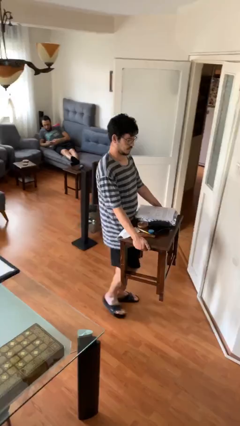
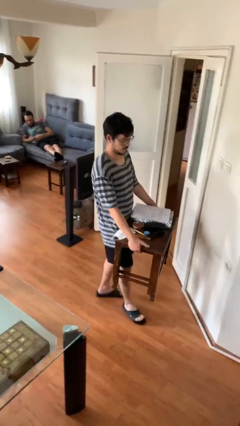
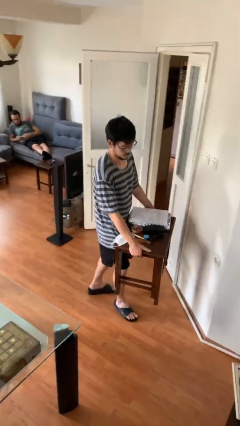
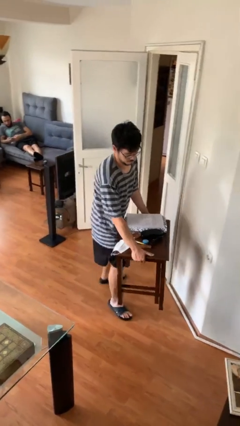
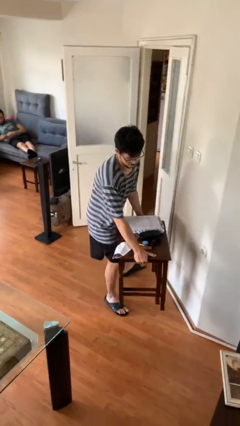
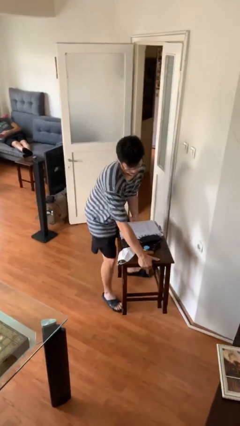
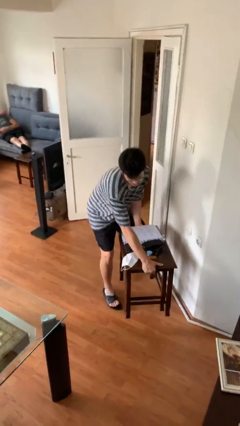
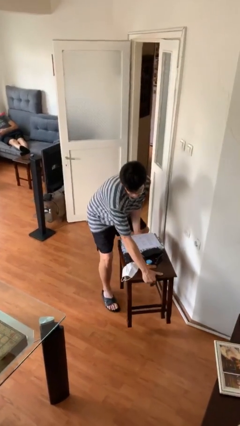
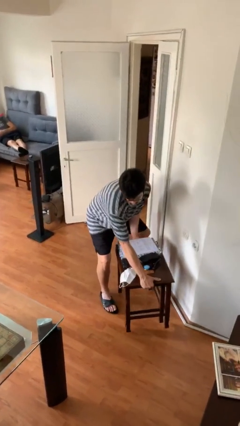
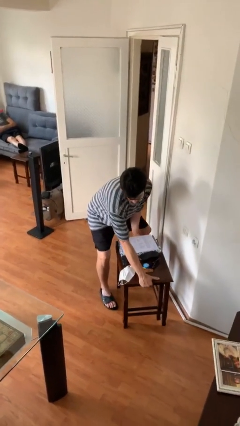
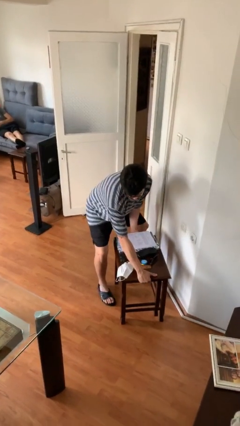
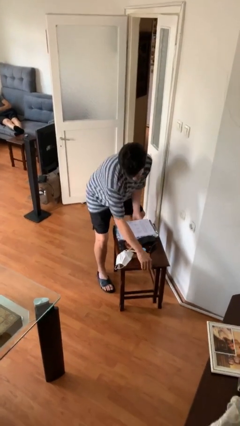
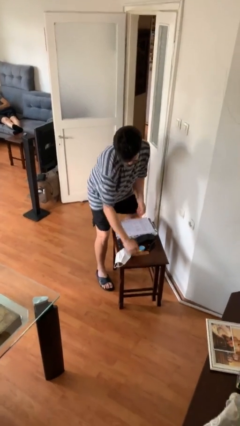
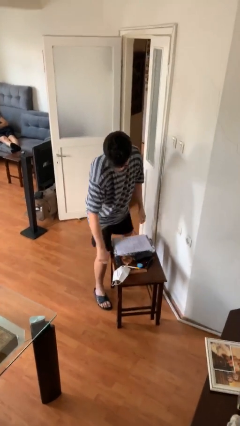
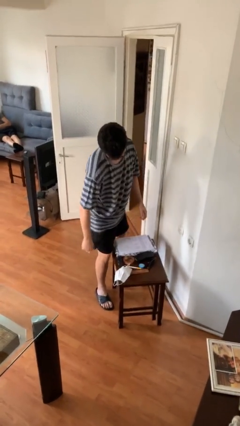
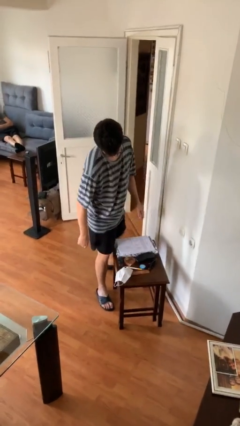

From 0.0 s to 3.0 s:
person puts down object on floor

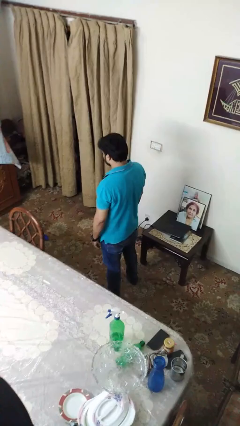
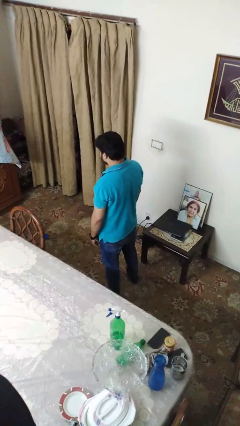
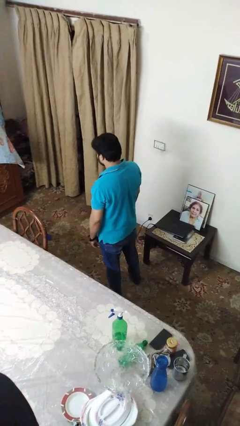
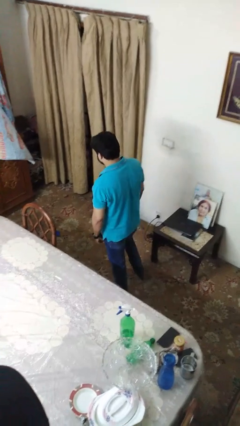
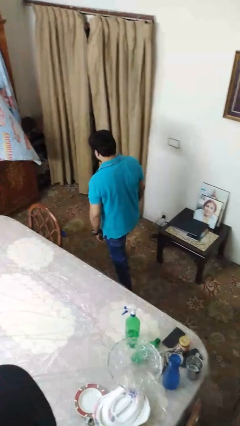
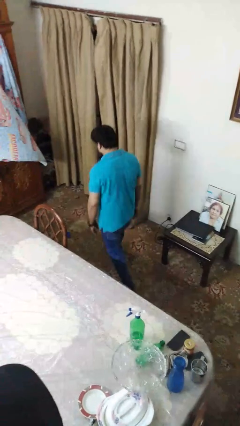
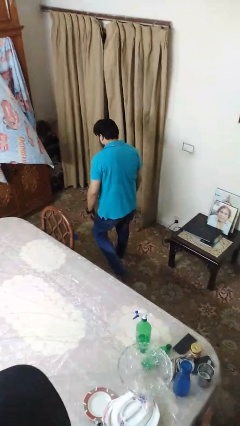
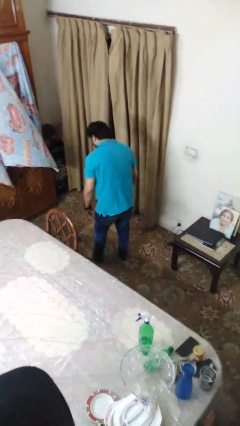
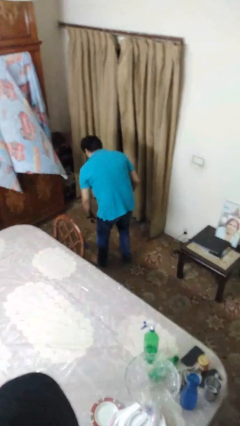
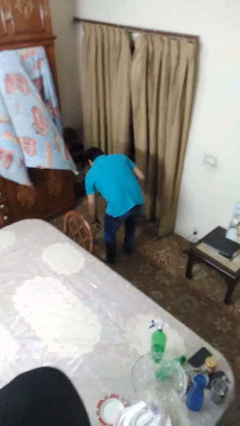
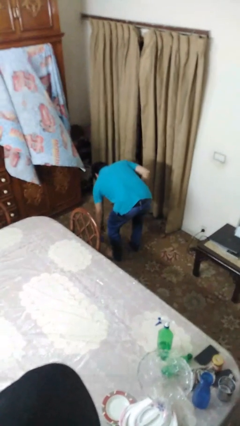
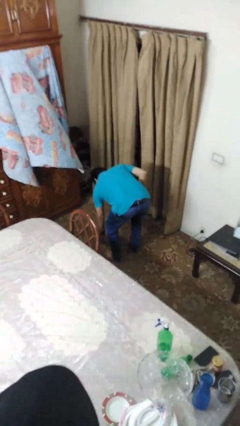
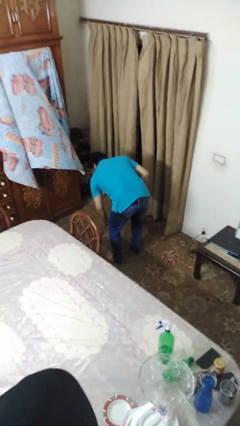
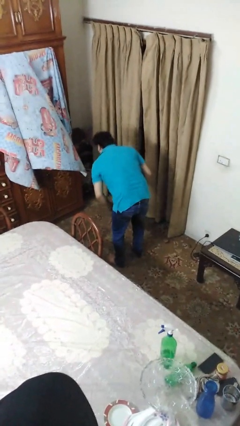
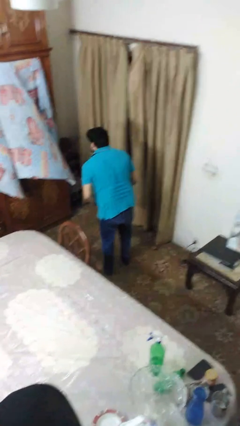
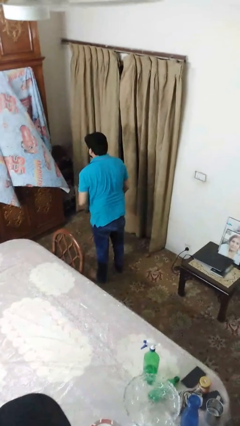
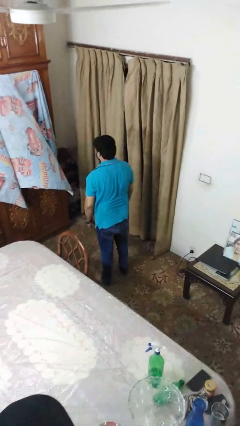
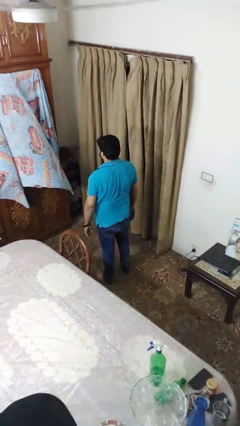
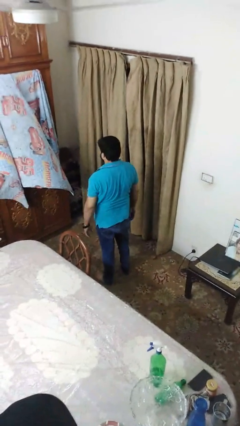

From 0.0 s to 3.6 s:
person picks up object from floor

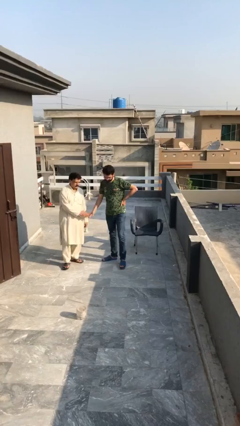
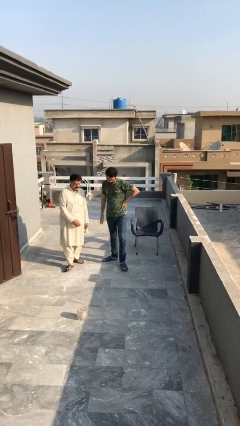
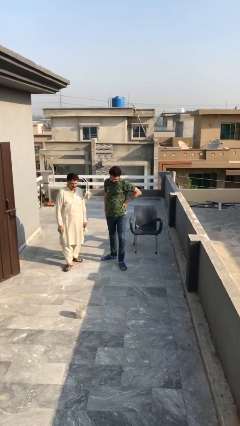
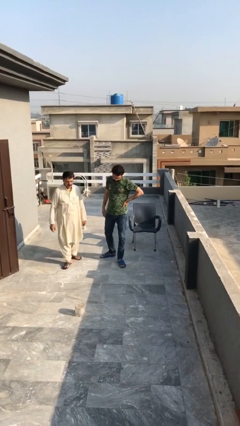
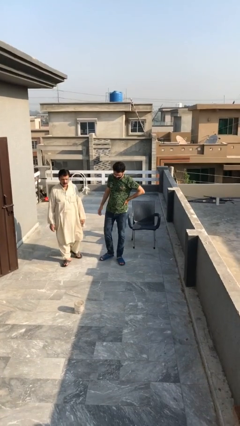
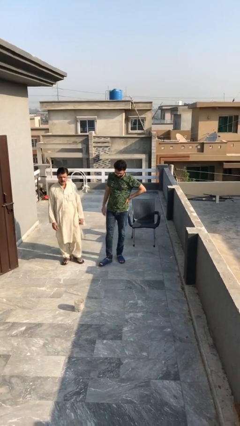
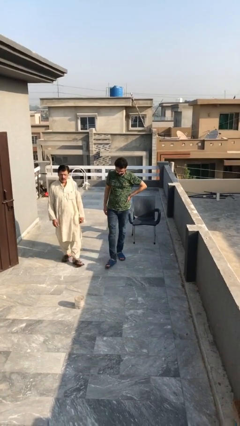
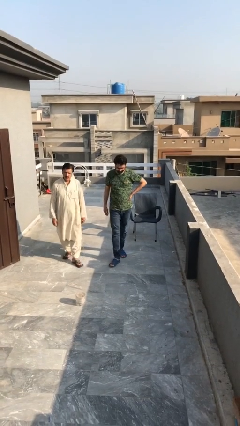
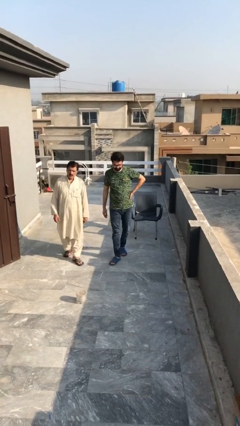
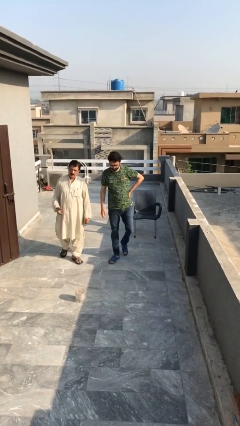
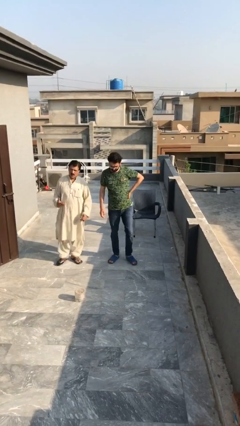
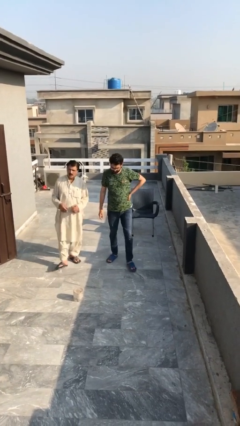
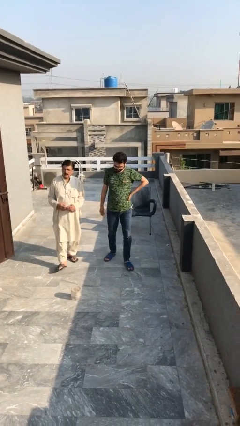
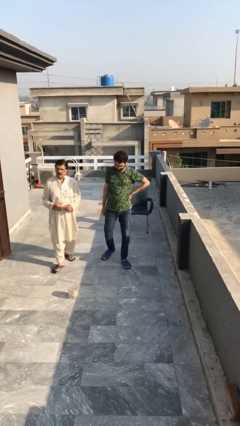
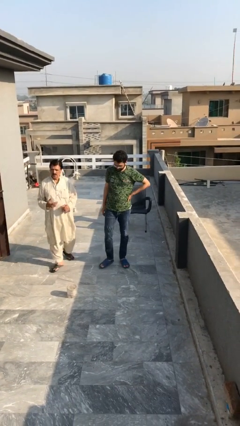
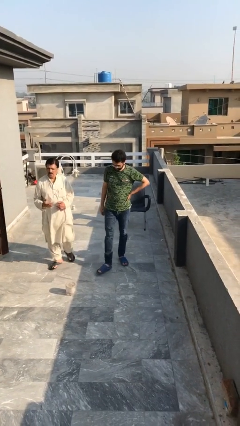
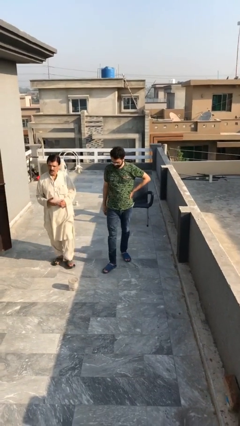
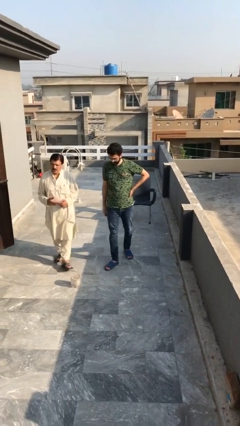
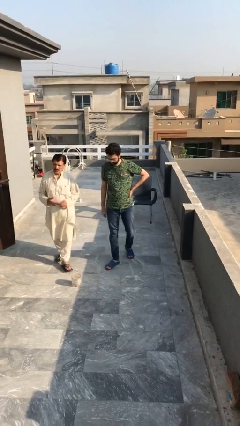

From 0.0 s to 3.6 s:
person talks to person

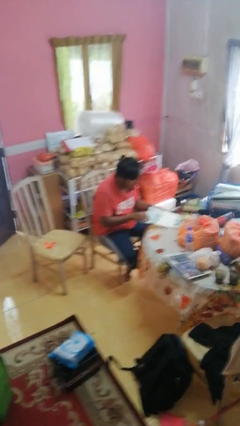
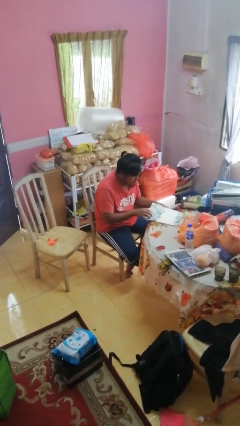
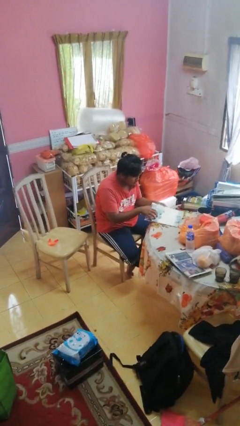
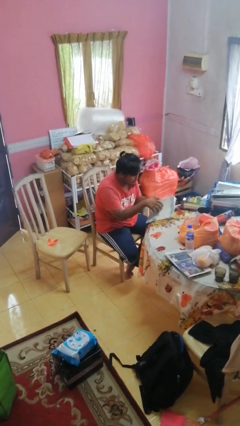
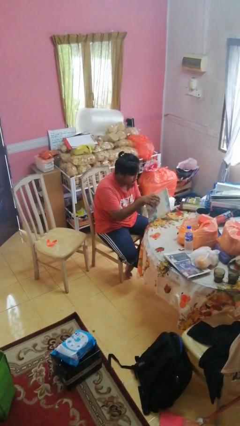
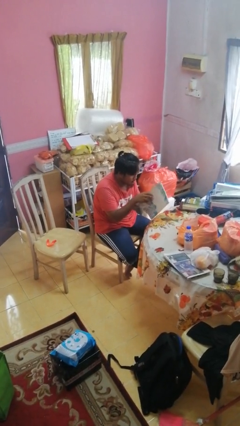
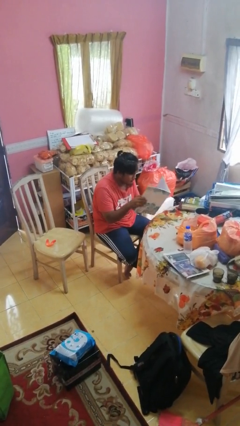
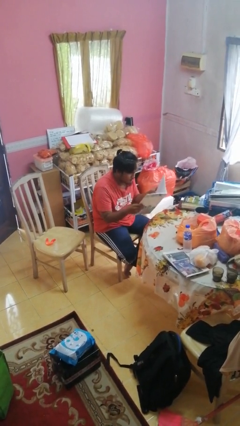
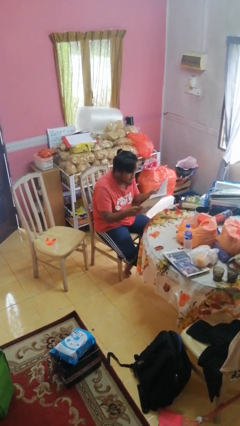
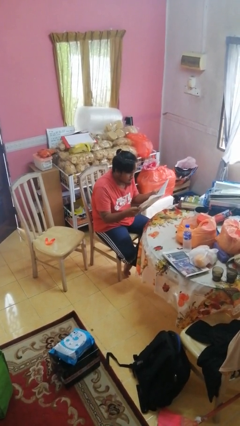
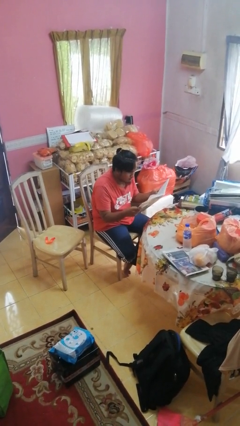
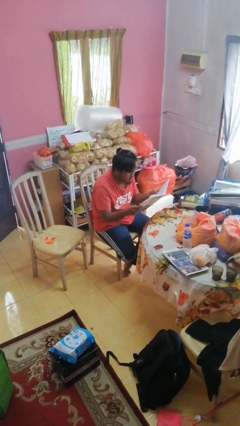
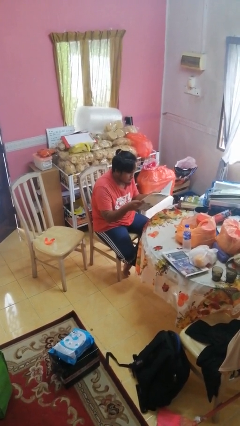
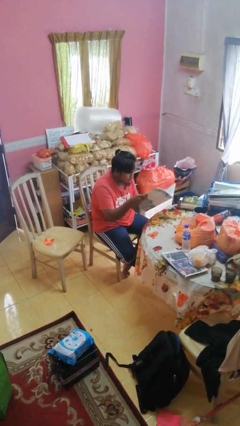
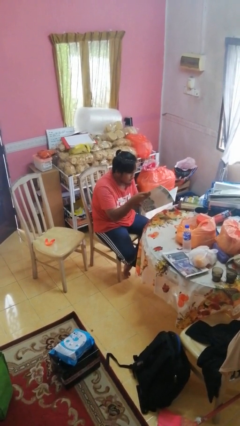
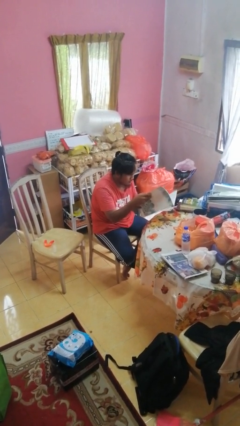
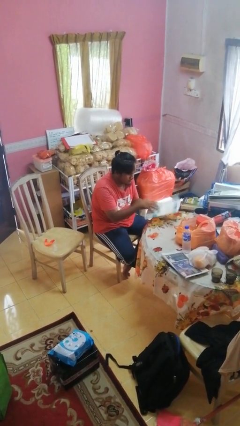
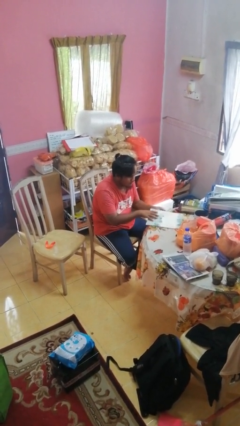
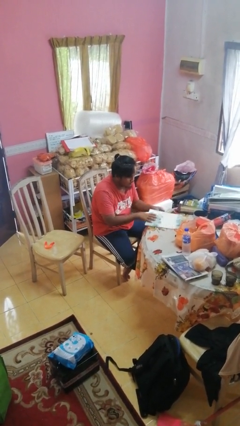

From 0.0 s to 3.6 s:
person reads magazine

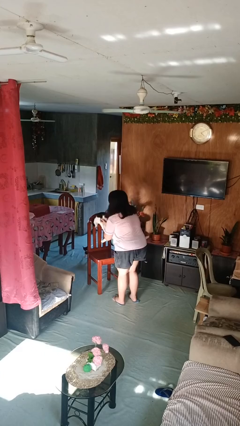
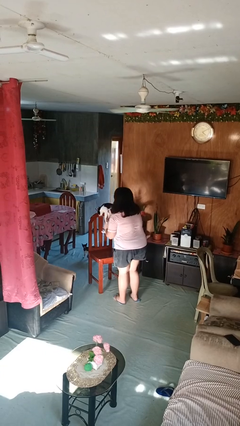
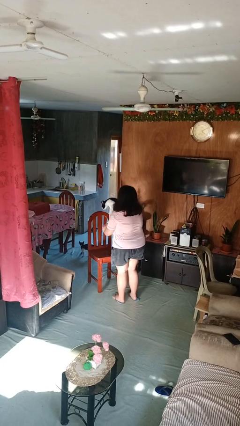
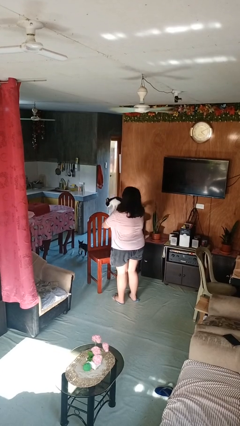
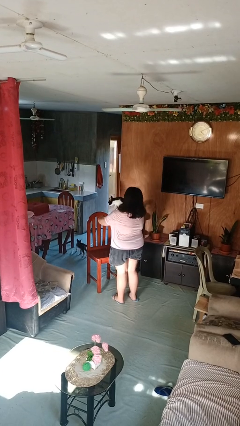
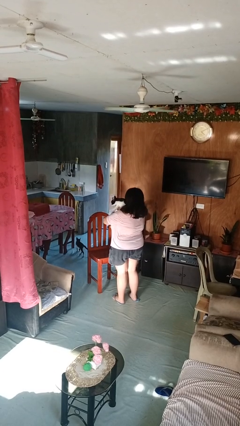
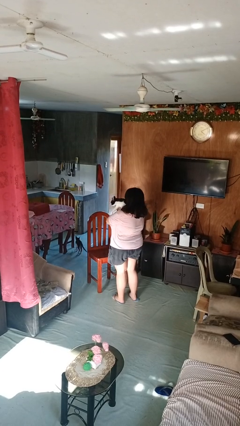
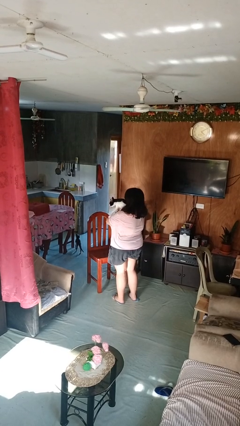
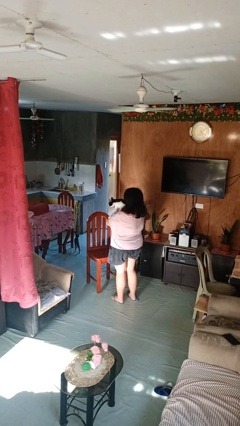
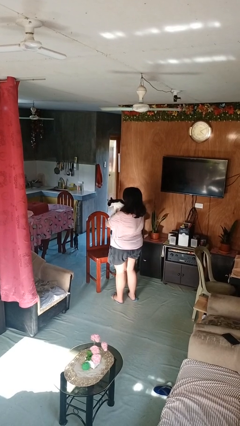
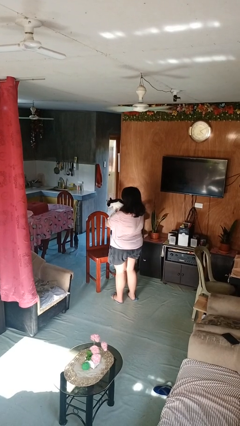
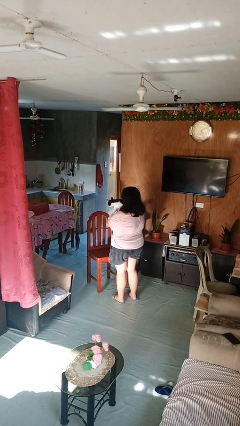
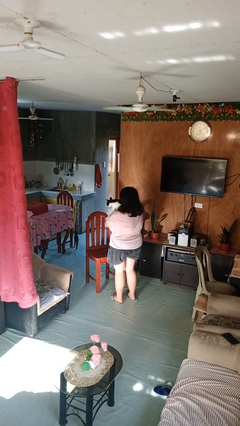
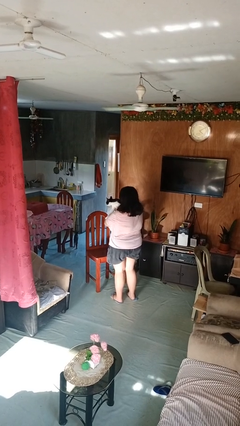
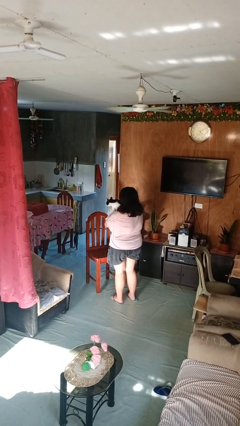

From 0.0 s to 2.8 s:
person hugs cat

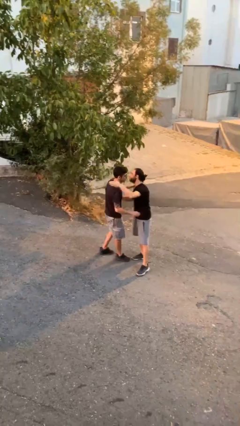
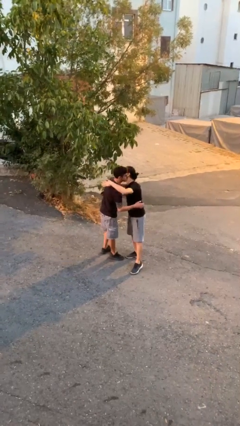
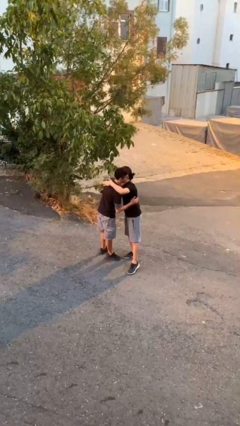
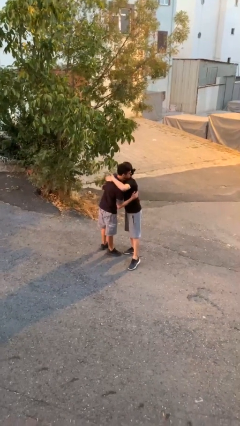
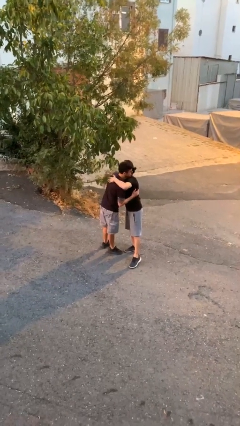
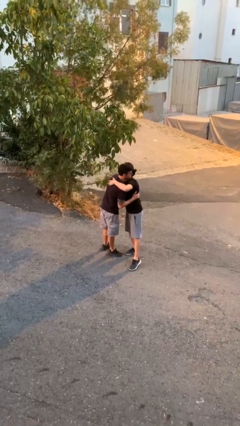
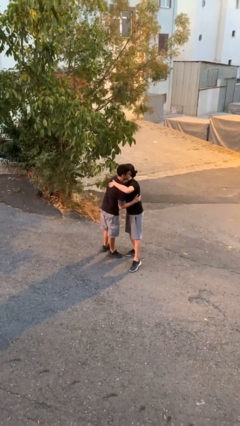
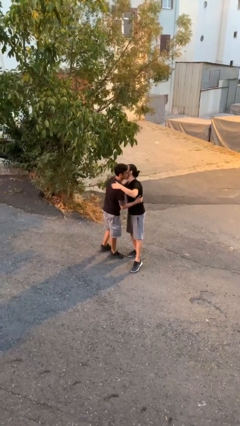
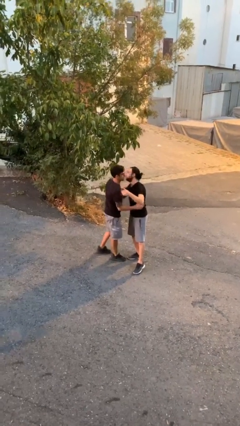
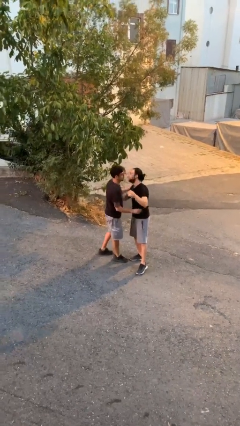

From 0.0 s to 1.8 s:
person embraces person
